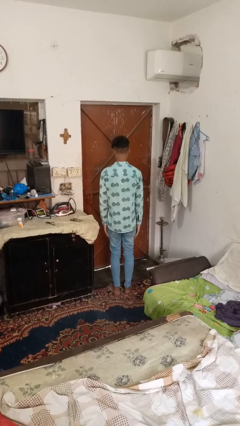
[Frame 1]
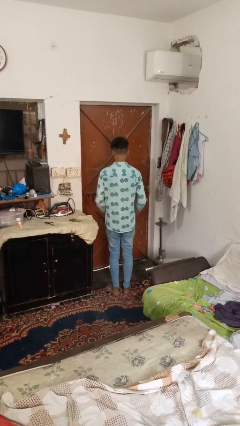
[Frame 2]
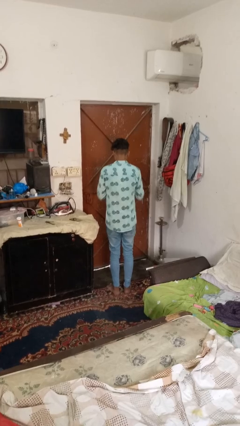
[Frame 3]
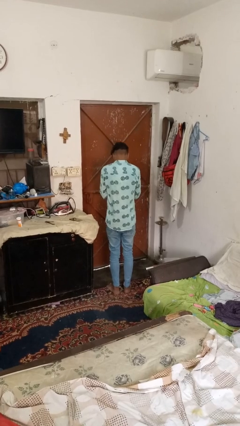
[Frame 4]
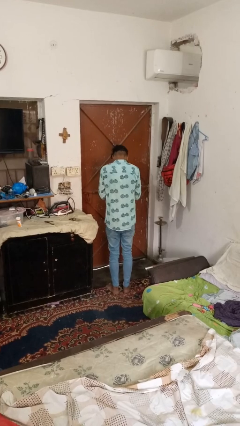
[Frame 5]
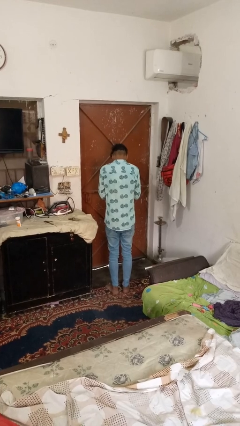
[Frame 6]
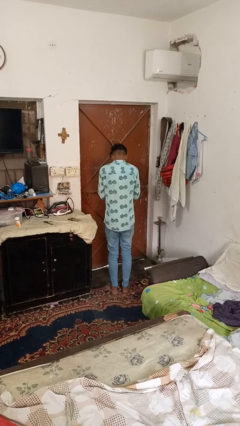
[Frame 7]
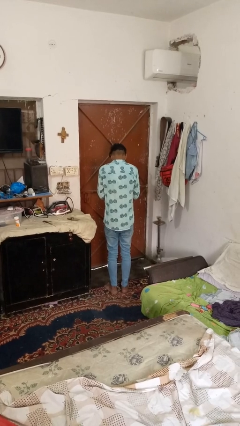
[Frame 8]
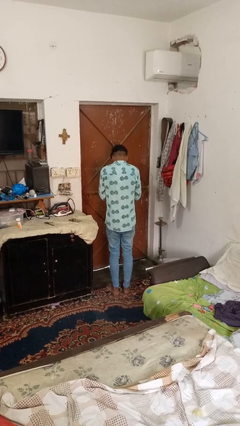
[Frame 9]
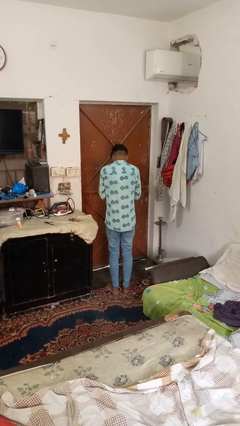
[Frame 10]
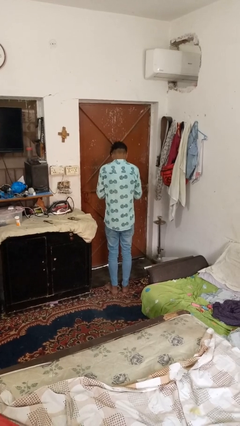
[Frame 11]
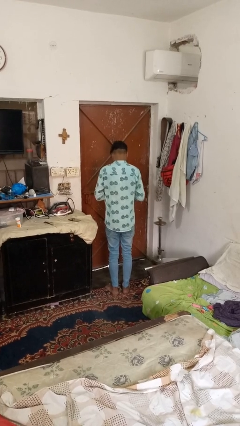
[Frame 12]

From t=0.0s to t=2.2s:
person sneezes into hand

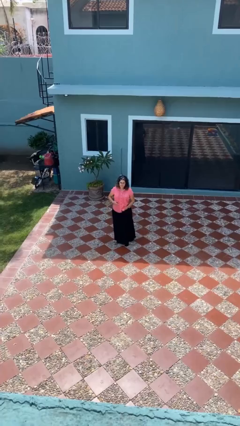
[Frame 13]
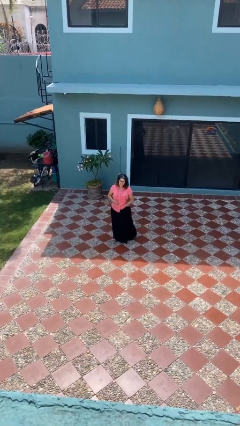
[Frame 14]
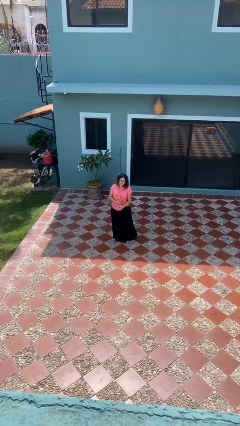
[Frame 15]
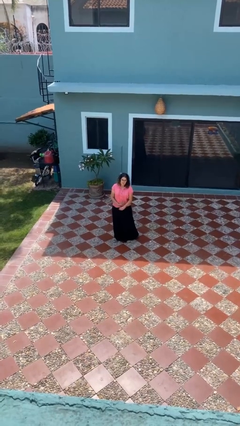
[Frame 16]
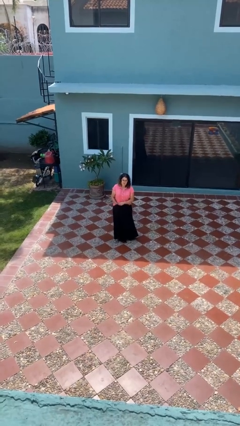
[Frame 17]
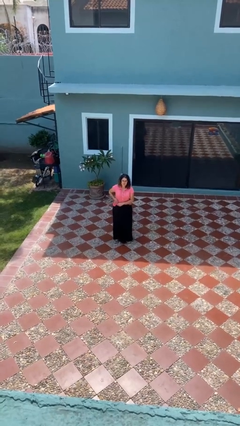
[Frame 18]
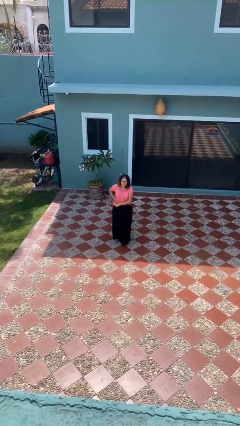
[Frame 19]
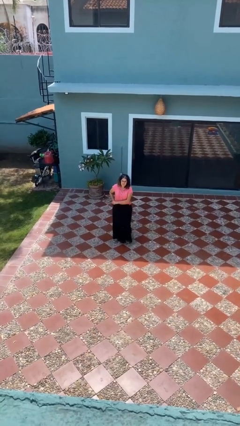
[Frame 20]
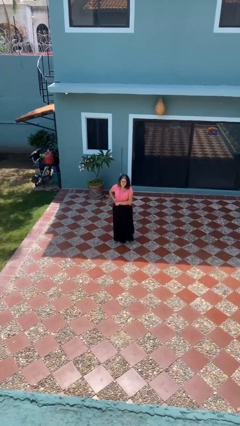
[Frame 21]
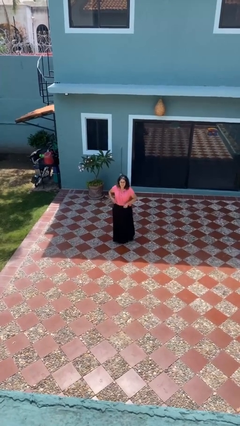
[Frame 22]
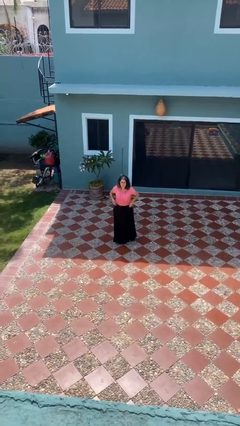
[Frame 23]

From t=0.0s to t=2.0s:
person tucks in shirt

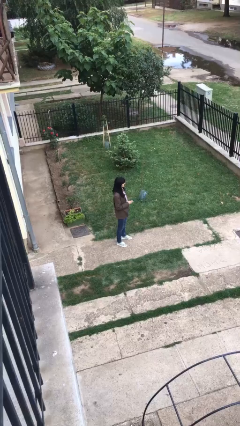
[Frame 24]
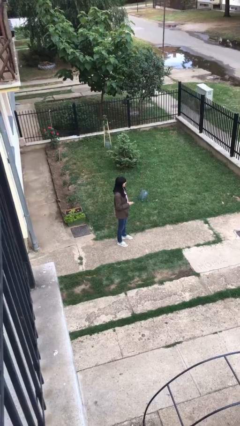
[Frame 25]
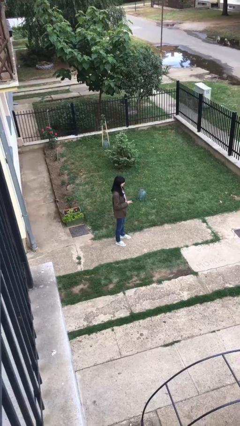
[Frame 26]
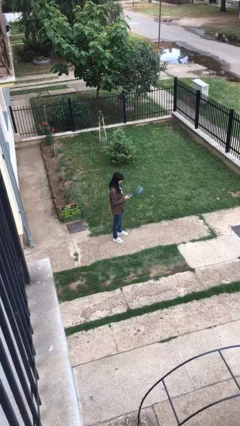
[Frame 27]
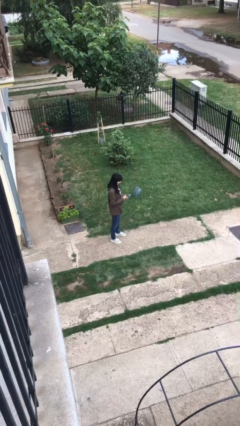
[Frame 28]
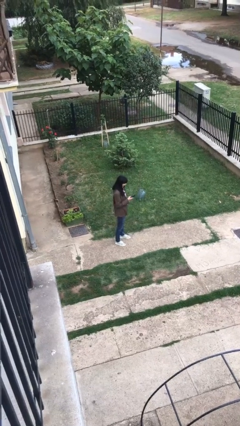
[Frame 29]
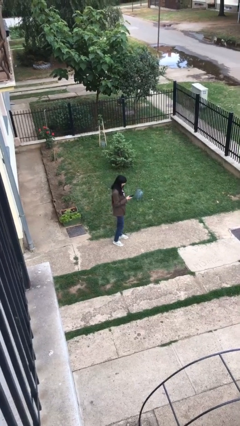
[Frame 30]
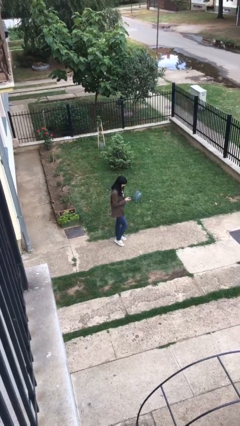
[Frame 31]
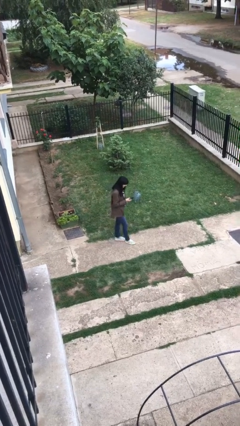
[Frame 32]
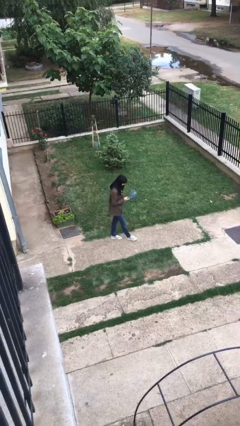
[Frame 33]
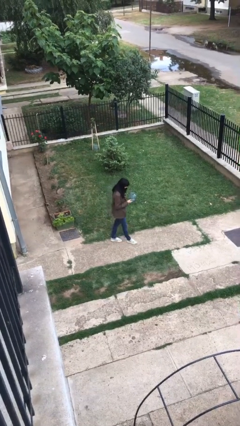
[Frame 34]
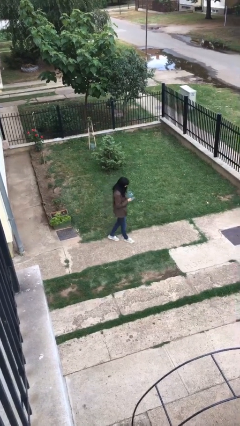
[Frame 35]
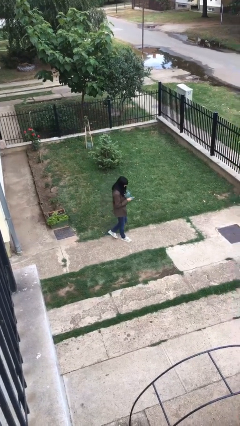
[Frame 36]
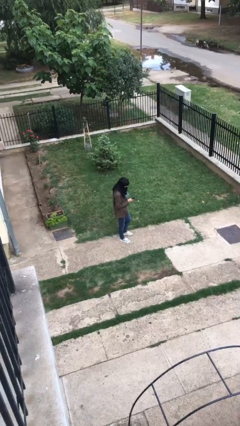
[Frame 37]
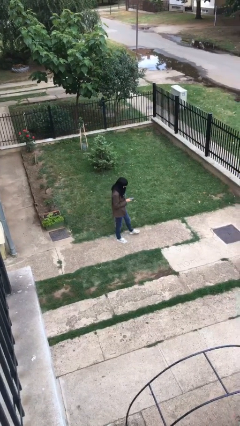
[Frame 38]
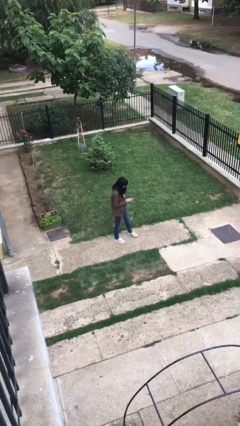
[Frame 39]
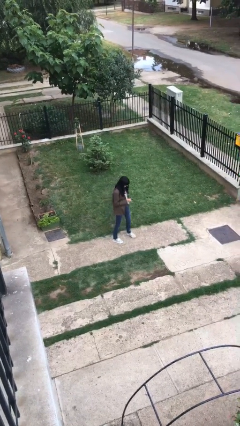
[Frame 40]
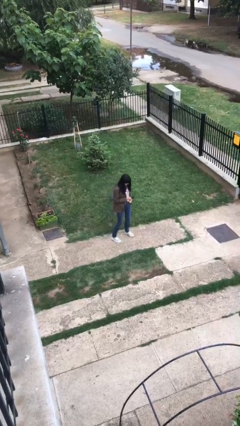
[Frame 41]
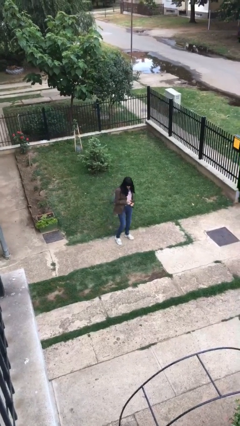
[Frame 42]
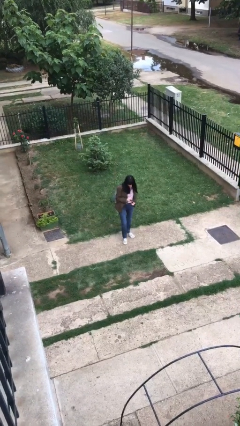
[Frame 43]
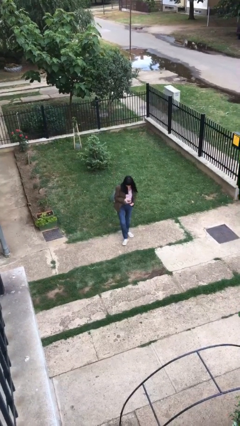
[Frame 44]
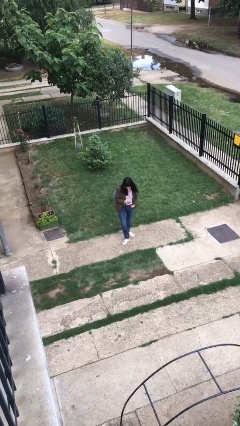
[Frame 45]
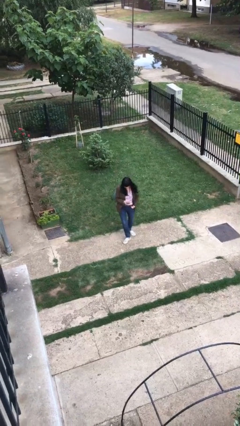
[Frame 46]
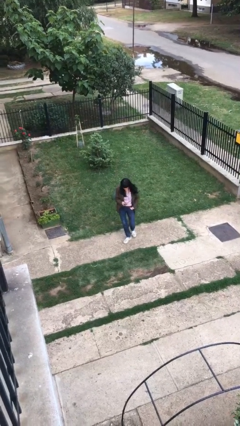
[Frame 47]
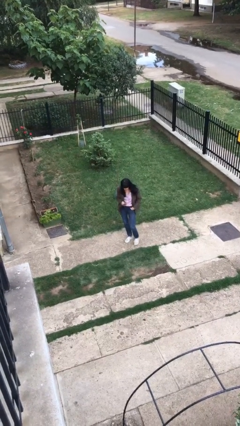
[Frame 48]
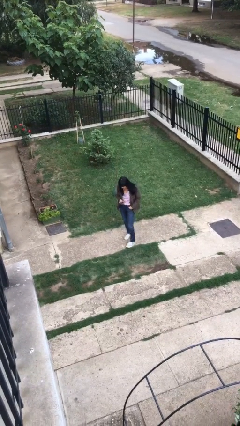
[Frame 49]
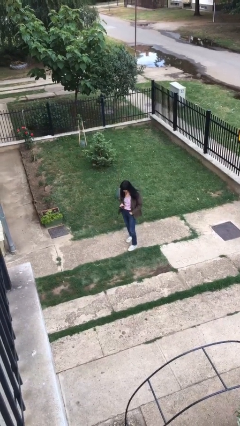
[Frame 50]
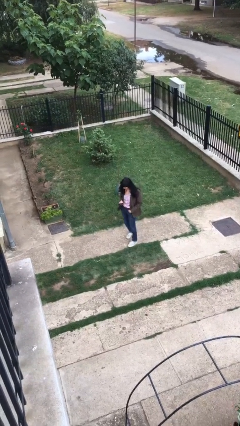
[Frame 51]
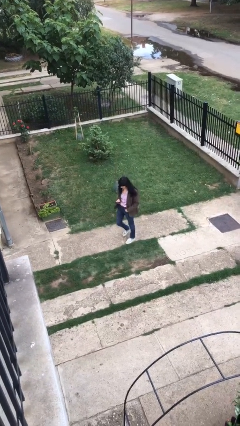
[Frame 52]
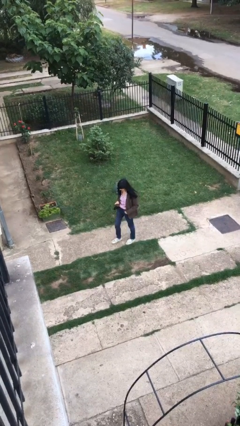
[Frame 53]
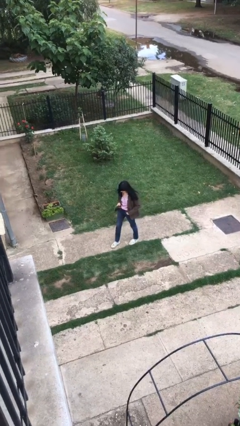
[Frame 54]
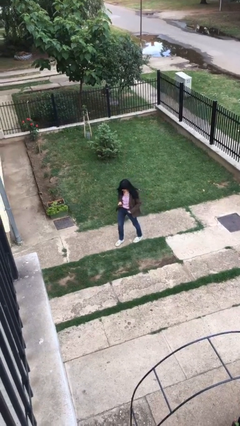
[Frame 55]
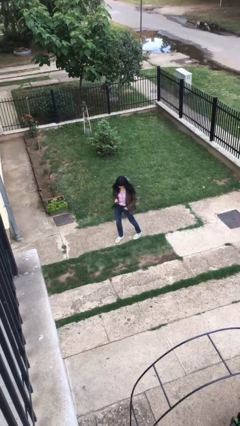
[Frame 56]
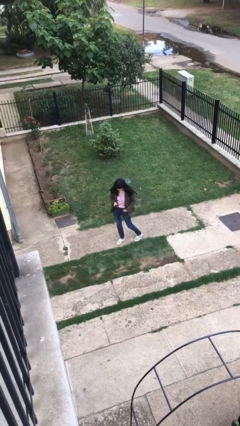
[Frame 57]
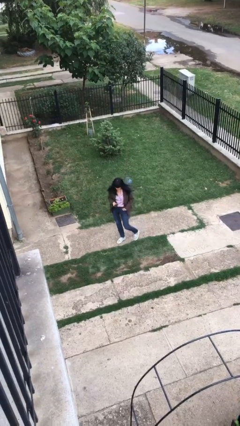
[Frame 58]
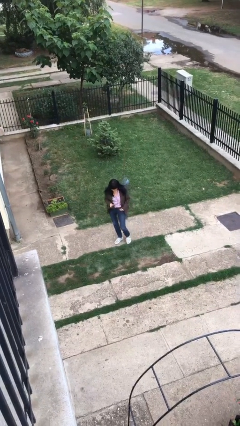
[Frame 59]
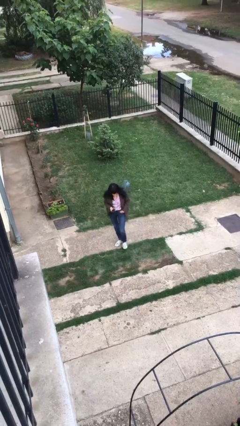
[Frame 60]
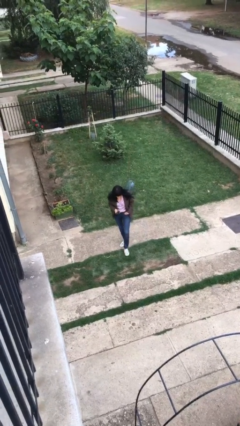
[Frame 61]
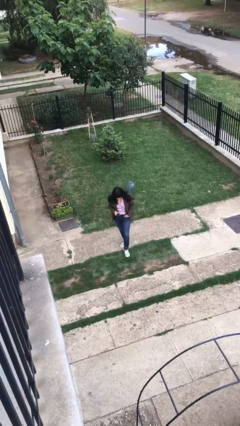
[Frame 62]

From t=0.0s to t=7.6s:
person texts on phone

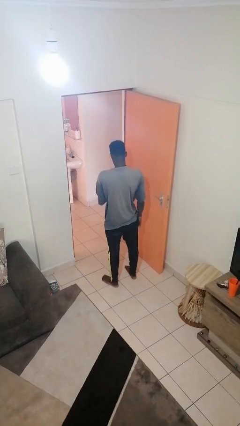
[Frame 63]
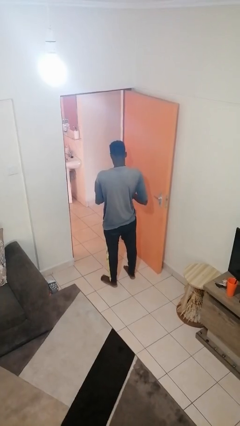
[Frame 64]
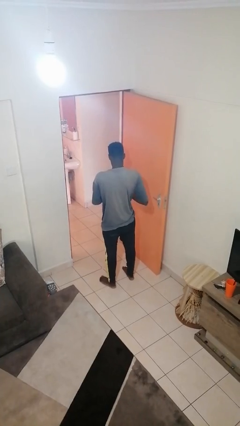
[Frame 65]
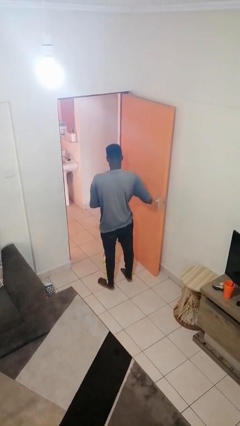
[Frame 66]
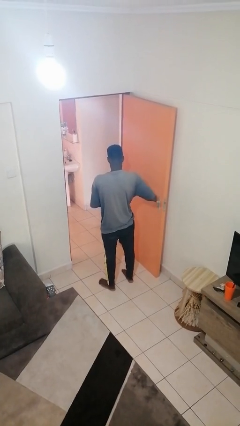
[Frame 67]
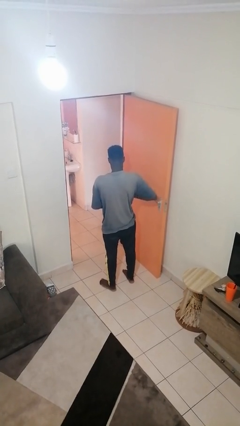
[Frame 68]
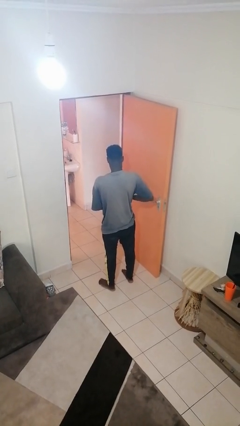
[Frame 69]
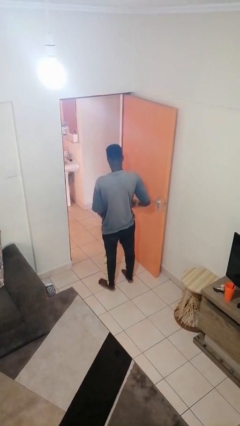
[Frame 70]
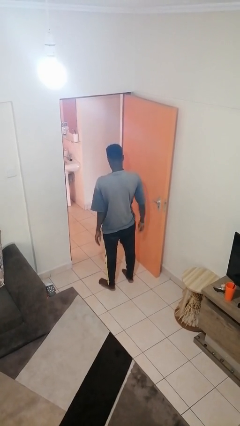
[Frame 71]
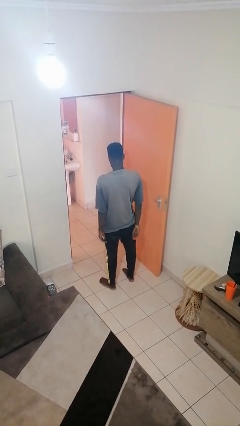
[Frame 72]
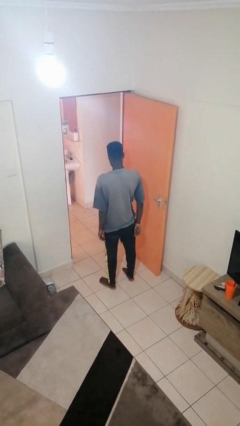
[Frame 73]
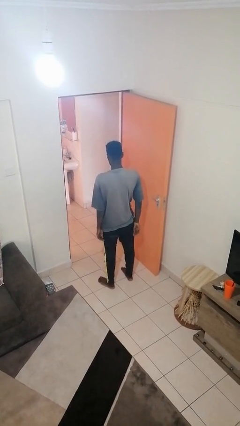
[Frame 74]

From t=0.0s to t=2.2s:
person puts phone into pocket

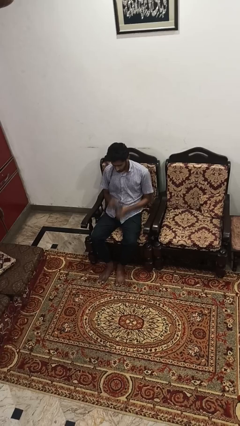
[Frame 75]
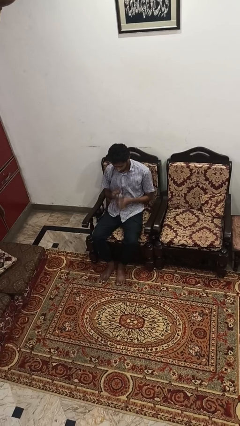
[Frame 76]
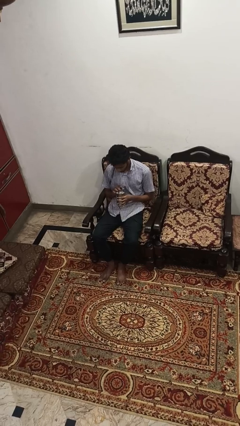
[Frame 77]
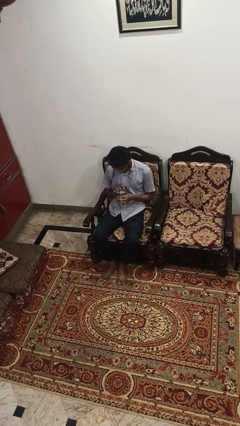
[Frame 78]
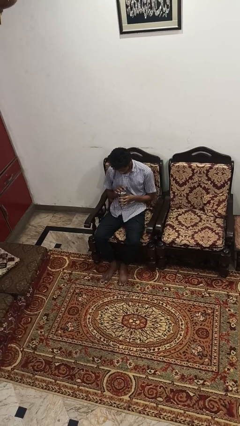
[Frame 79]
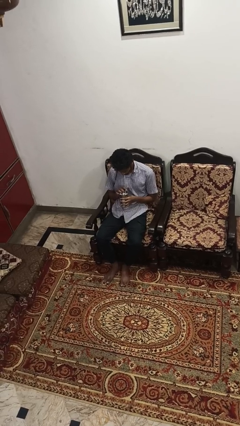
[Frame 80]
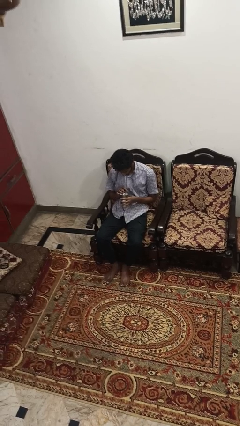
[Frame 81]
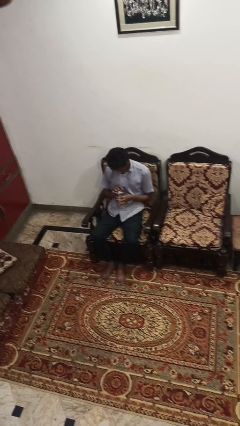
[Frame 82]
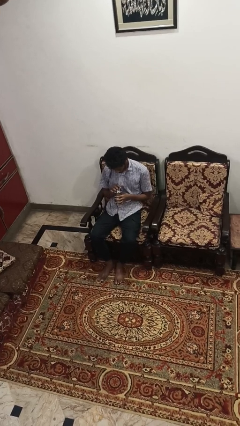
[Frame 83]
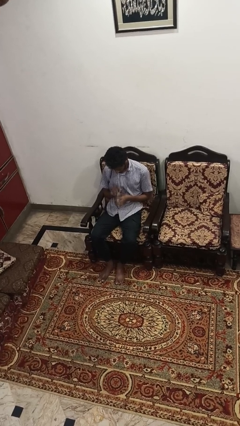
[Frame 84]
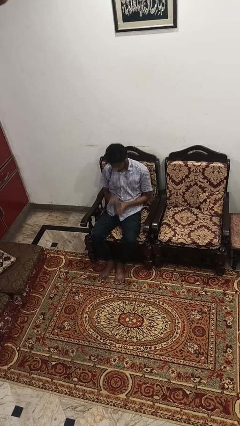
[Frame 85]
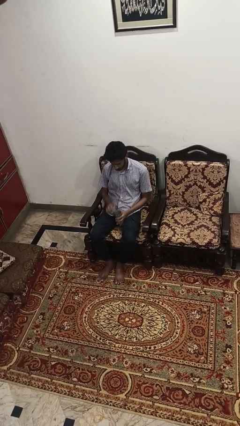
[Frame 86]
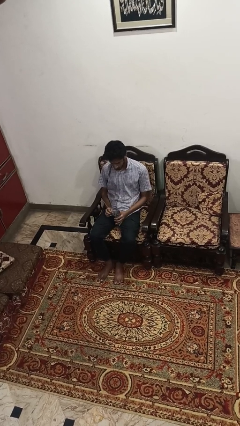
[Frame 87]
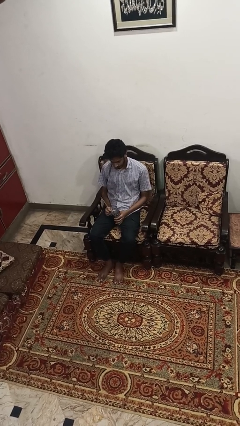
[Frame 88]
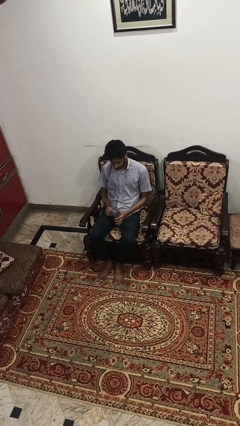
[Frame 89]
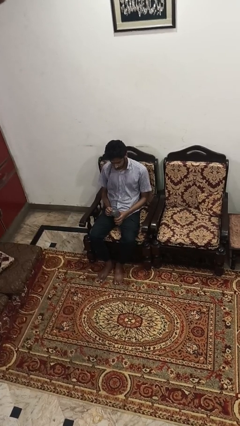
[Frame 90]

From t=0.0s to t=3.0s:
person drinks from straw
